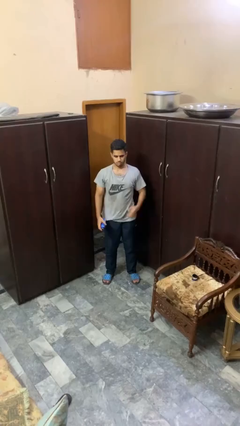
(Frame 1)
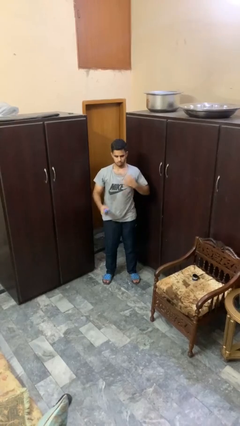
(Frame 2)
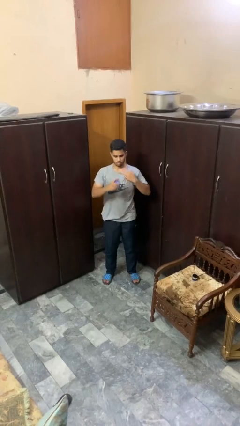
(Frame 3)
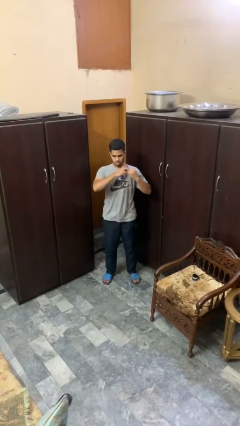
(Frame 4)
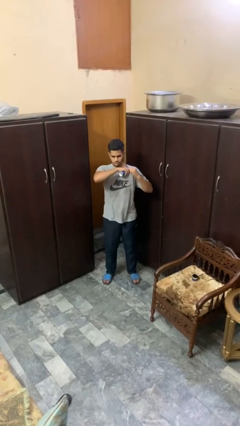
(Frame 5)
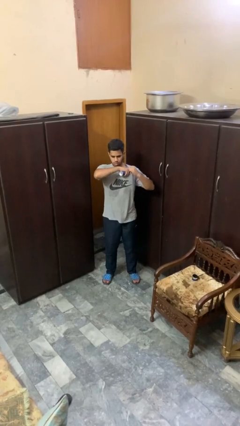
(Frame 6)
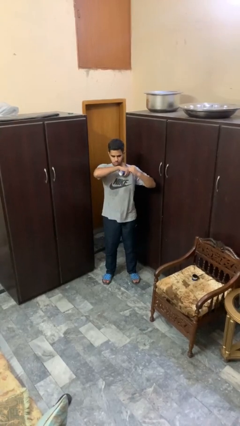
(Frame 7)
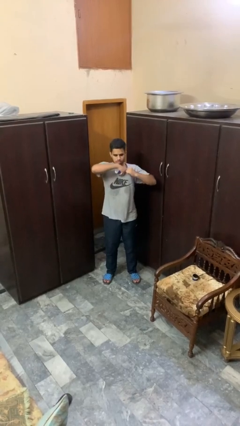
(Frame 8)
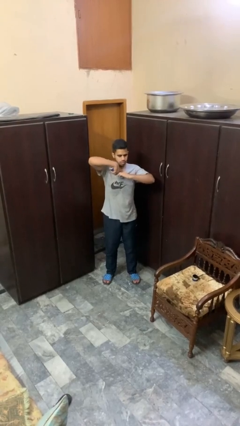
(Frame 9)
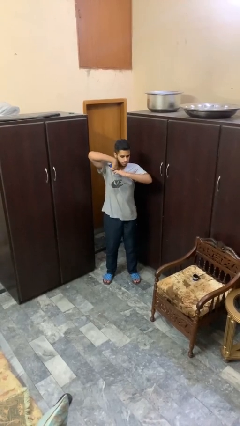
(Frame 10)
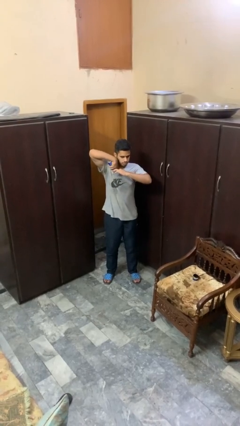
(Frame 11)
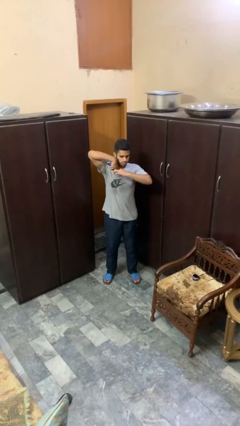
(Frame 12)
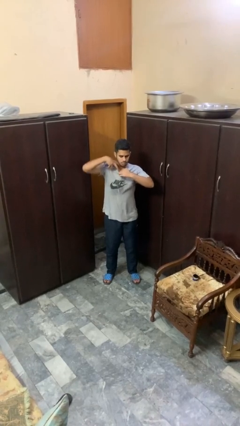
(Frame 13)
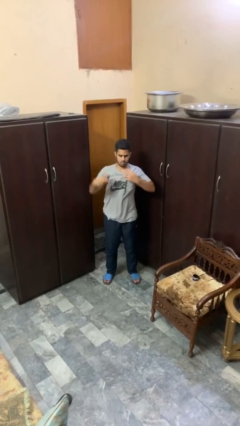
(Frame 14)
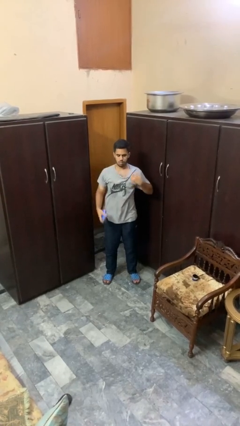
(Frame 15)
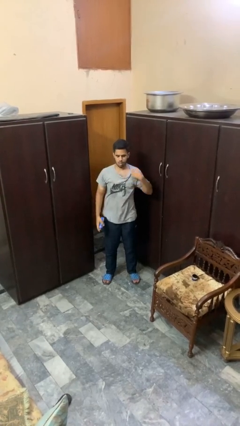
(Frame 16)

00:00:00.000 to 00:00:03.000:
person applies deodorant

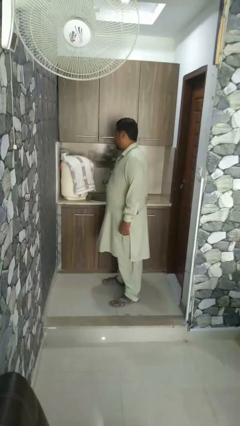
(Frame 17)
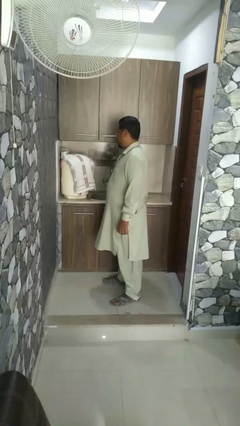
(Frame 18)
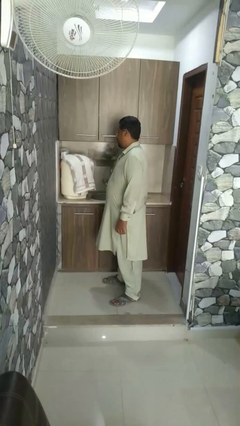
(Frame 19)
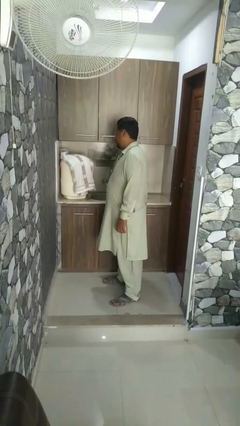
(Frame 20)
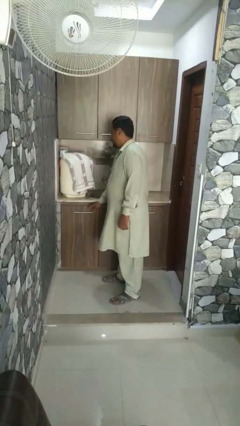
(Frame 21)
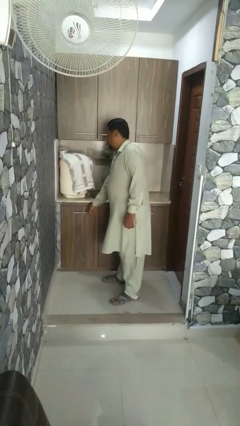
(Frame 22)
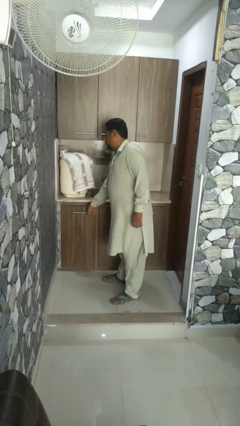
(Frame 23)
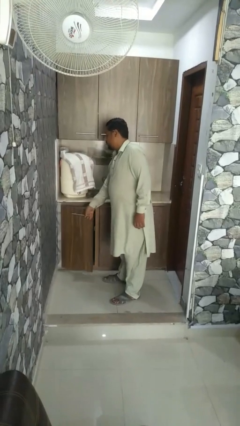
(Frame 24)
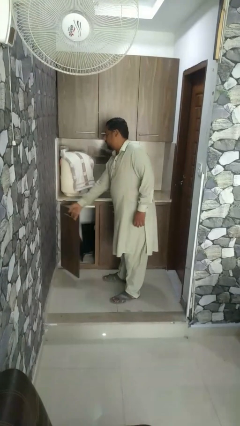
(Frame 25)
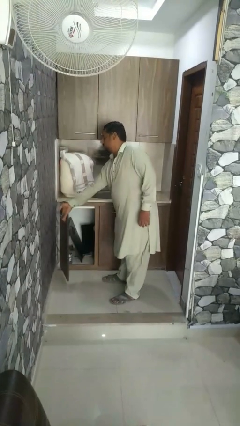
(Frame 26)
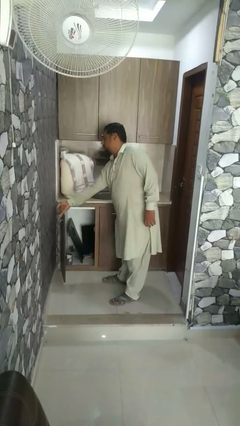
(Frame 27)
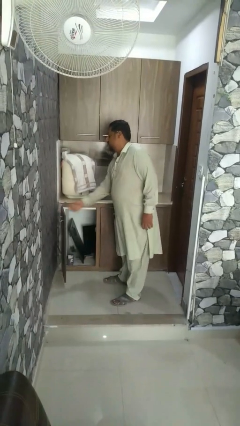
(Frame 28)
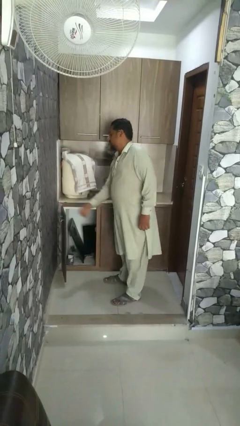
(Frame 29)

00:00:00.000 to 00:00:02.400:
person opens refrigerator

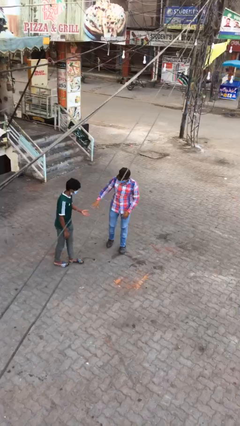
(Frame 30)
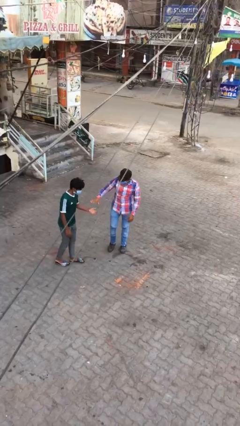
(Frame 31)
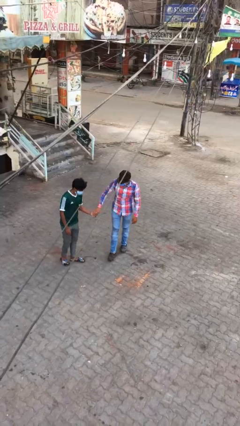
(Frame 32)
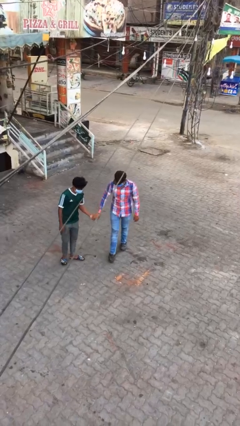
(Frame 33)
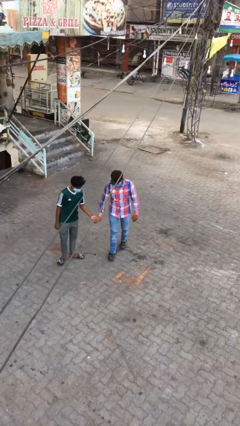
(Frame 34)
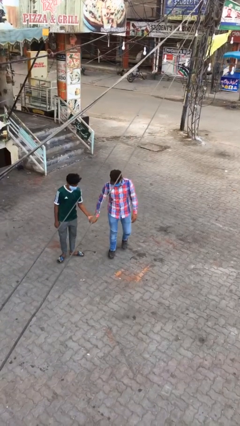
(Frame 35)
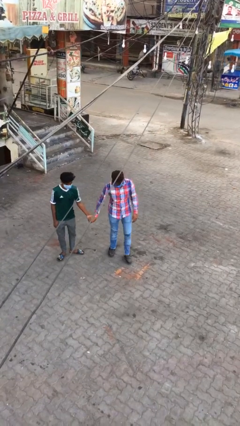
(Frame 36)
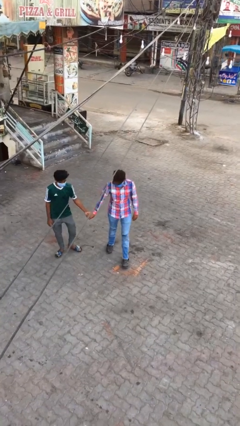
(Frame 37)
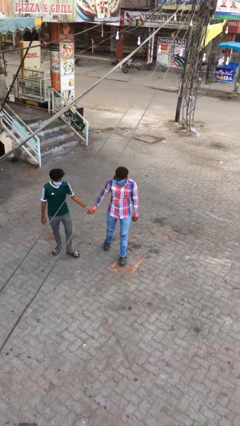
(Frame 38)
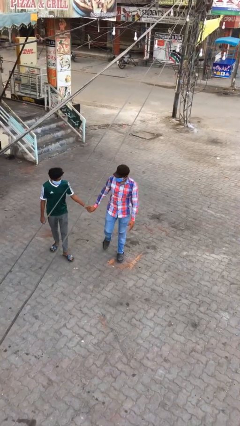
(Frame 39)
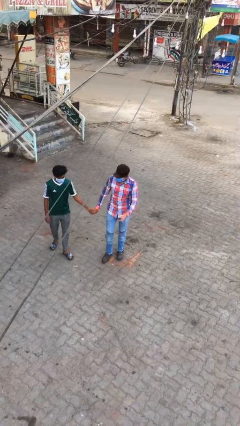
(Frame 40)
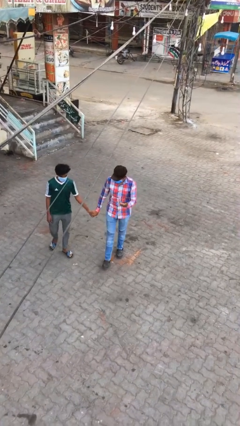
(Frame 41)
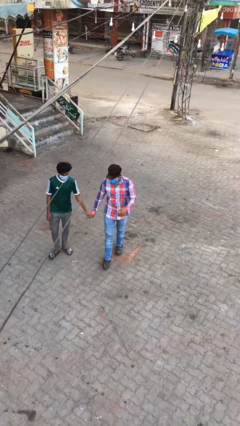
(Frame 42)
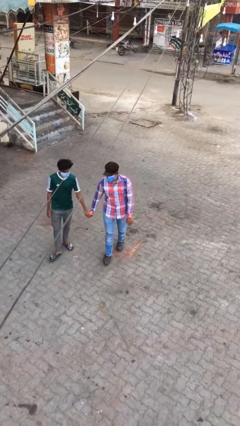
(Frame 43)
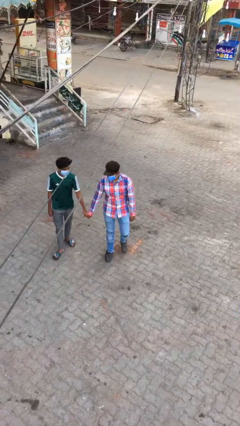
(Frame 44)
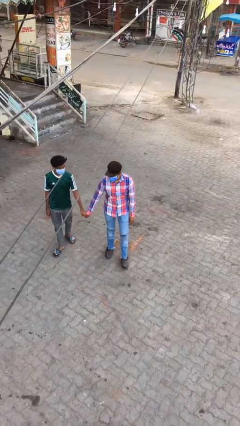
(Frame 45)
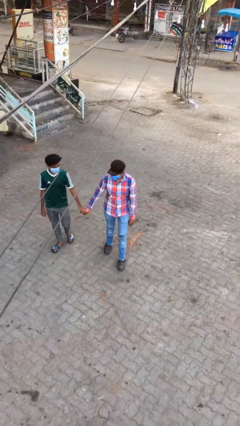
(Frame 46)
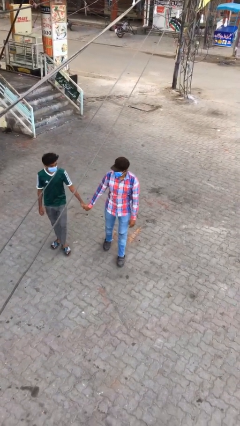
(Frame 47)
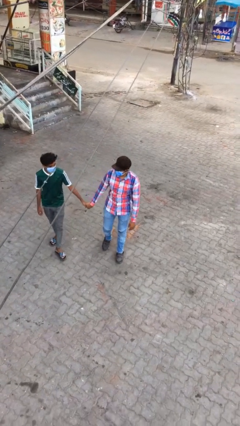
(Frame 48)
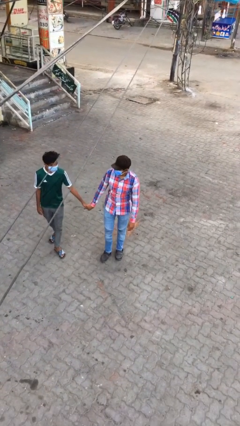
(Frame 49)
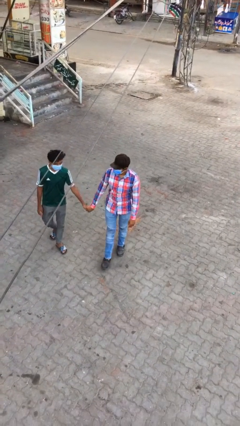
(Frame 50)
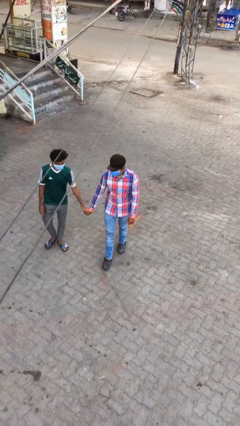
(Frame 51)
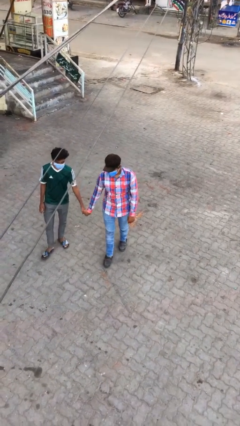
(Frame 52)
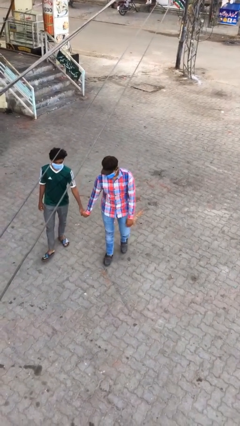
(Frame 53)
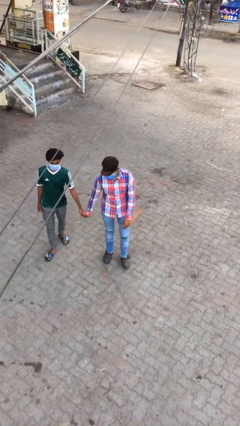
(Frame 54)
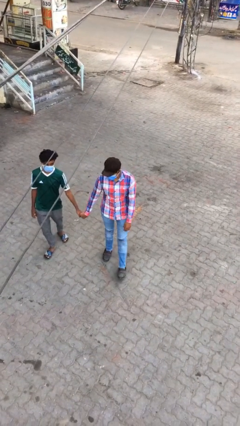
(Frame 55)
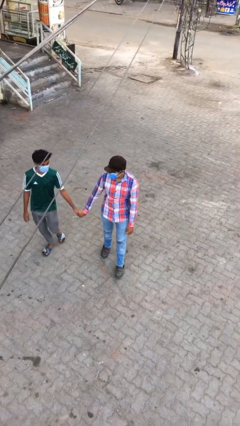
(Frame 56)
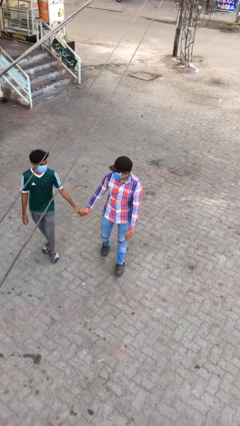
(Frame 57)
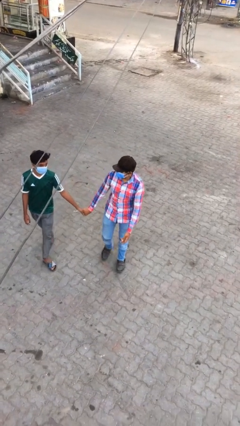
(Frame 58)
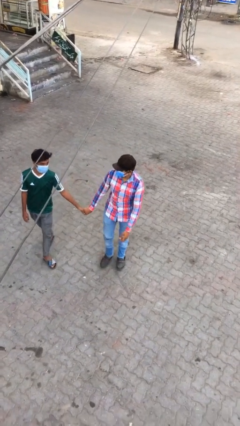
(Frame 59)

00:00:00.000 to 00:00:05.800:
person holds hand

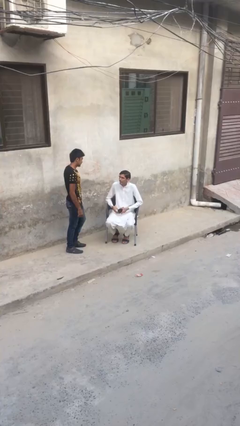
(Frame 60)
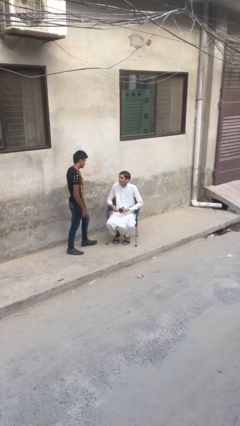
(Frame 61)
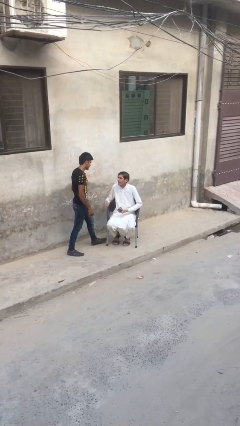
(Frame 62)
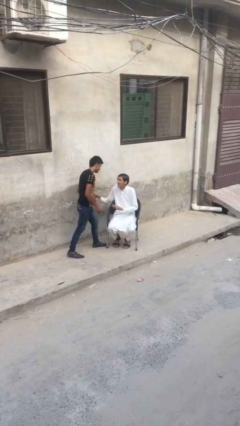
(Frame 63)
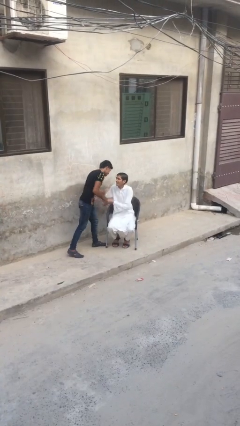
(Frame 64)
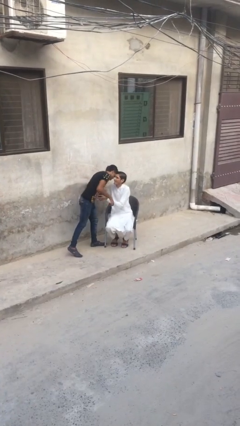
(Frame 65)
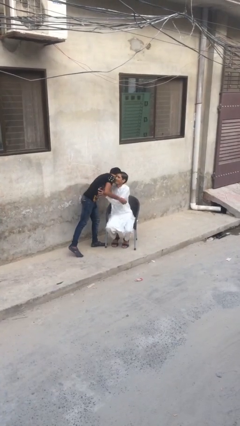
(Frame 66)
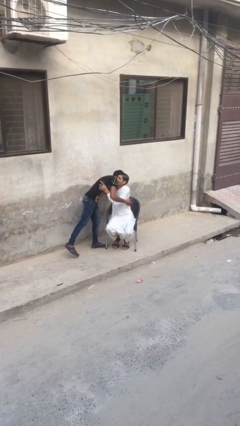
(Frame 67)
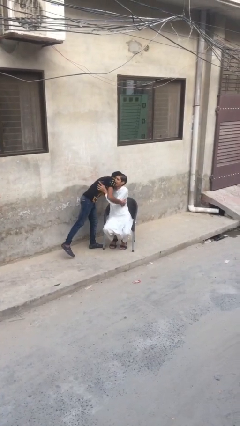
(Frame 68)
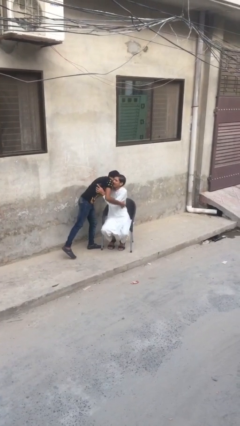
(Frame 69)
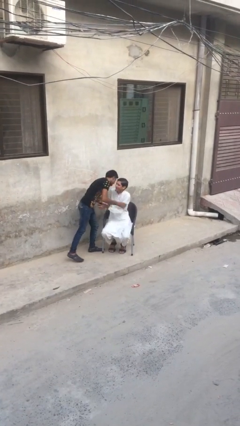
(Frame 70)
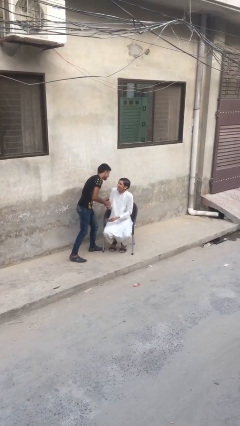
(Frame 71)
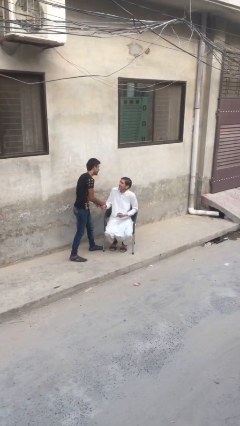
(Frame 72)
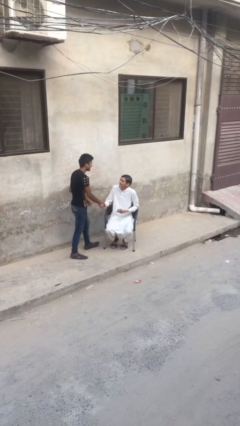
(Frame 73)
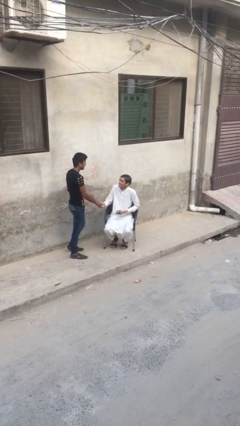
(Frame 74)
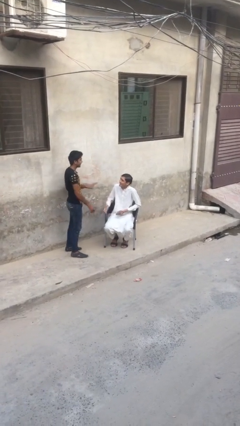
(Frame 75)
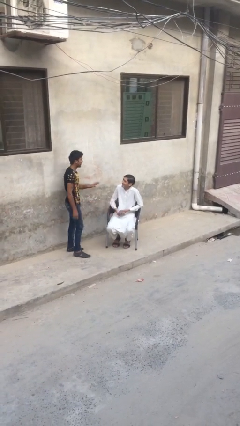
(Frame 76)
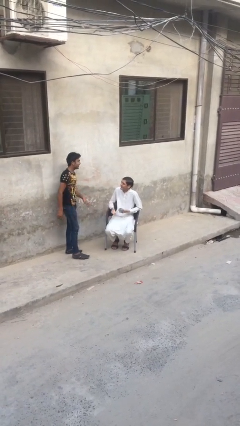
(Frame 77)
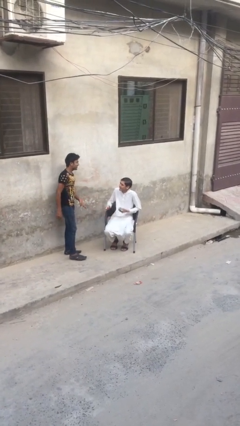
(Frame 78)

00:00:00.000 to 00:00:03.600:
person embraces person

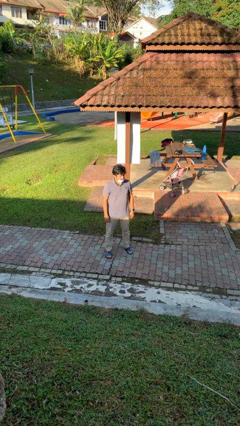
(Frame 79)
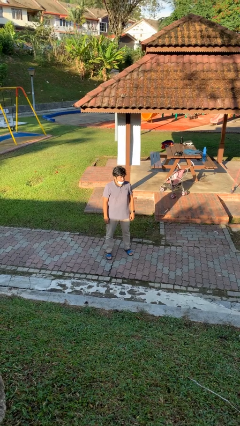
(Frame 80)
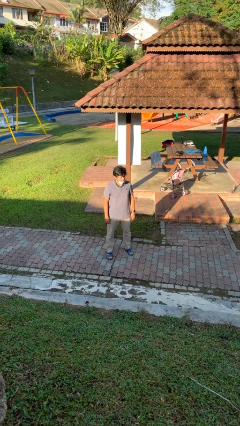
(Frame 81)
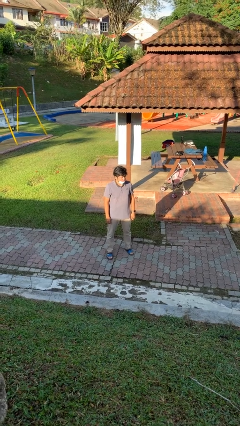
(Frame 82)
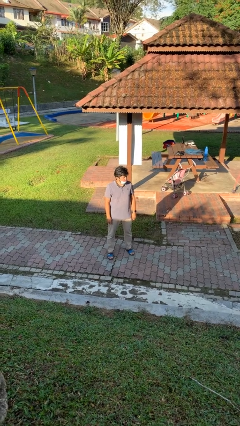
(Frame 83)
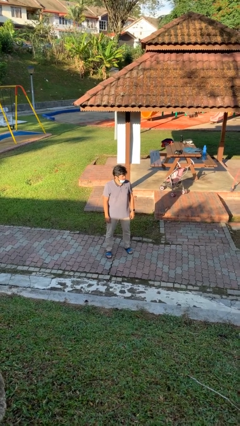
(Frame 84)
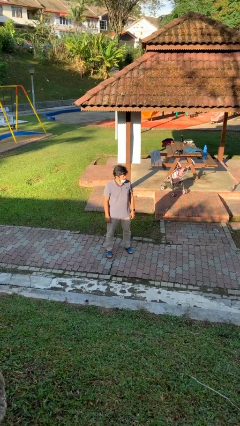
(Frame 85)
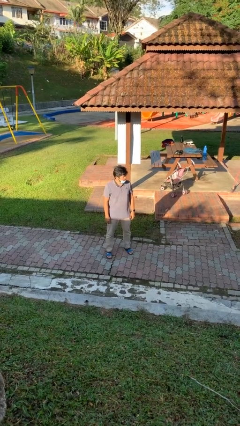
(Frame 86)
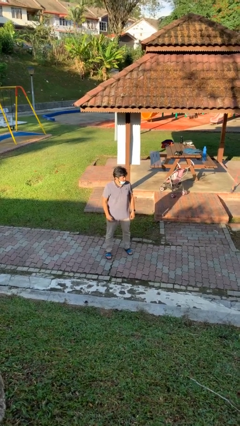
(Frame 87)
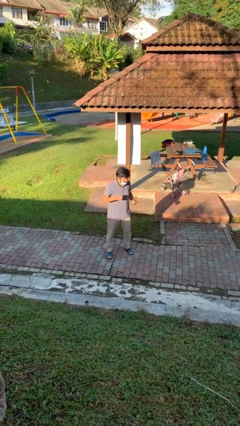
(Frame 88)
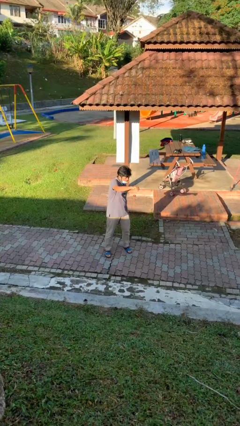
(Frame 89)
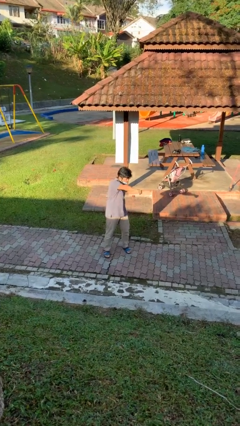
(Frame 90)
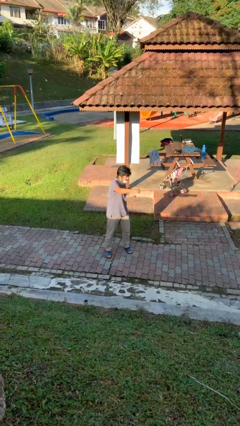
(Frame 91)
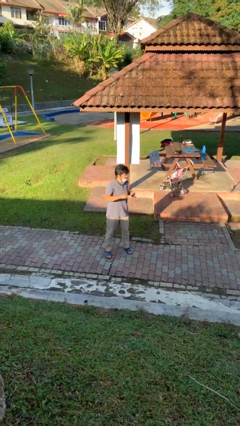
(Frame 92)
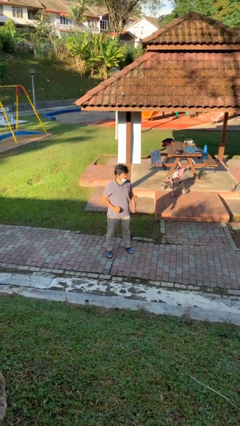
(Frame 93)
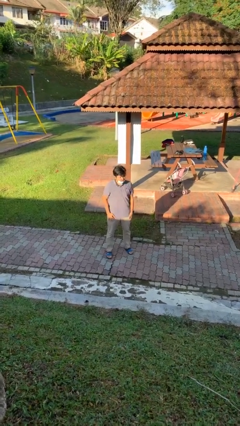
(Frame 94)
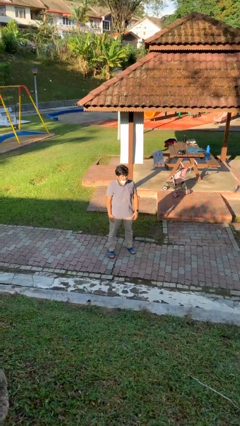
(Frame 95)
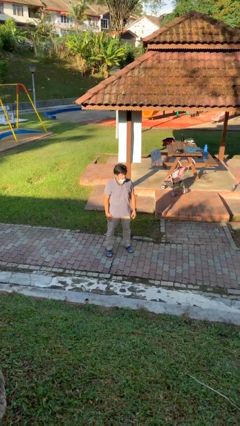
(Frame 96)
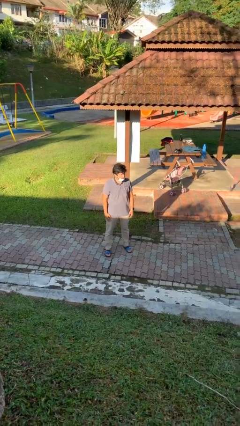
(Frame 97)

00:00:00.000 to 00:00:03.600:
person punches
